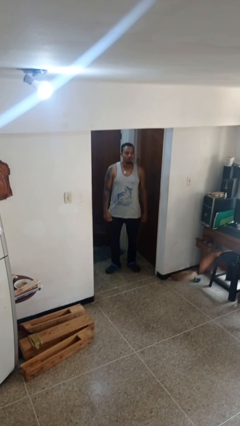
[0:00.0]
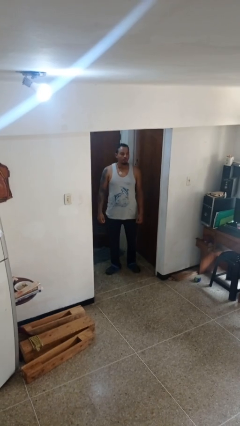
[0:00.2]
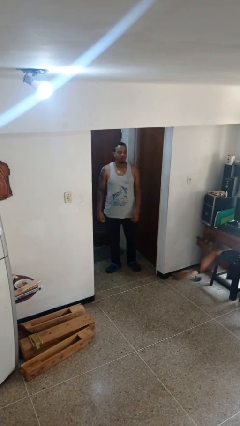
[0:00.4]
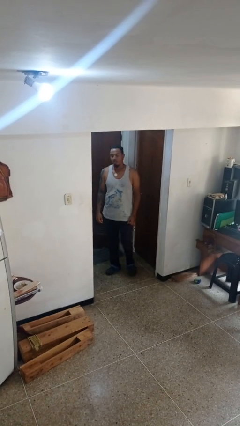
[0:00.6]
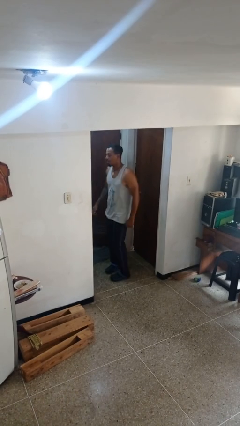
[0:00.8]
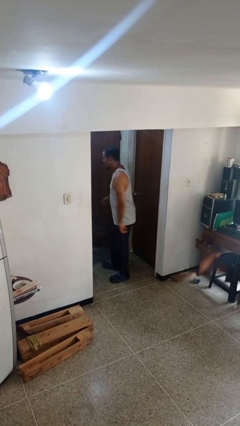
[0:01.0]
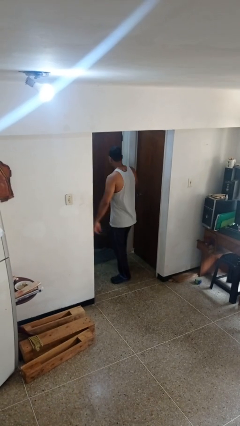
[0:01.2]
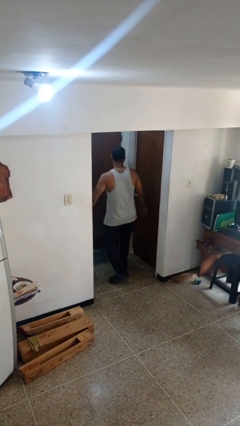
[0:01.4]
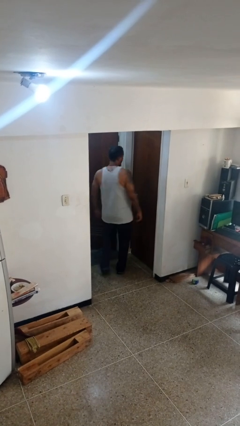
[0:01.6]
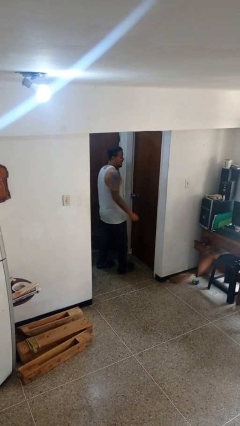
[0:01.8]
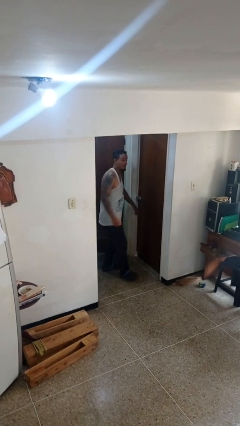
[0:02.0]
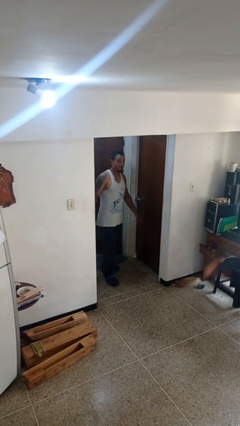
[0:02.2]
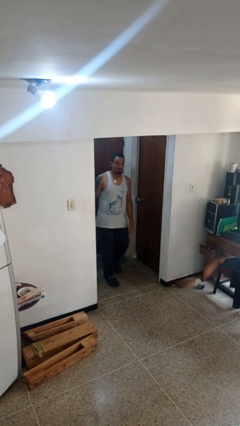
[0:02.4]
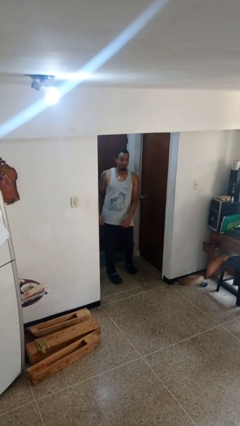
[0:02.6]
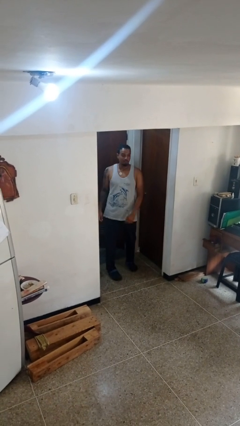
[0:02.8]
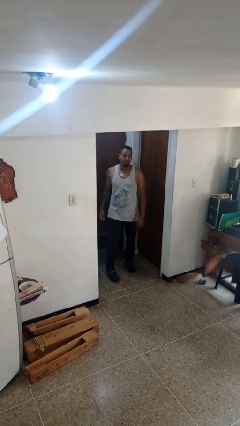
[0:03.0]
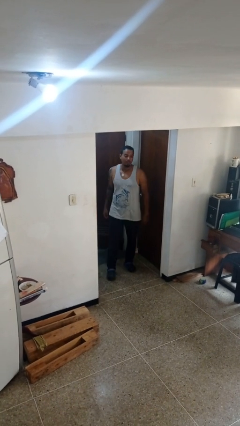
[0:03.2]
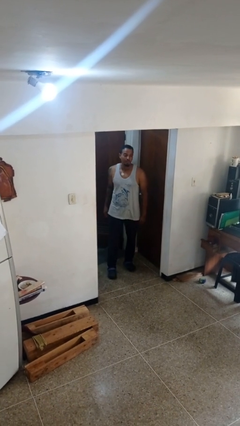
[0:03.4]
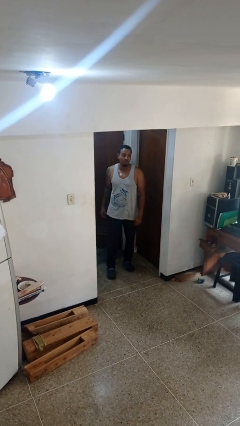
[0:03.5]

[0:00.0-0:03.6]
person twirls

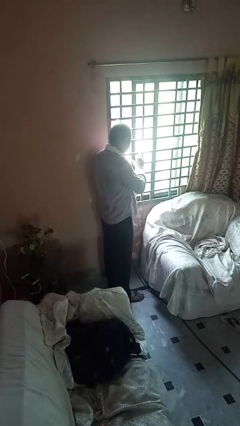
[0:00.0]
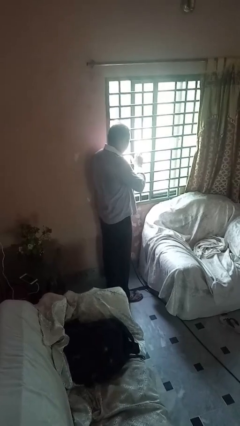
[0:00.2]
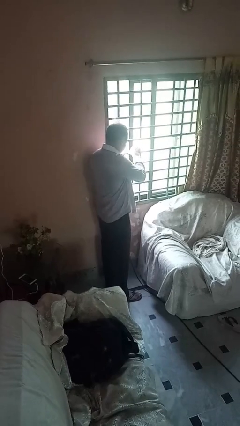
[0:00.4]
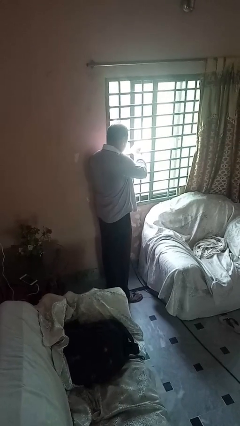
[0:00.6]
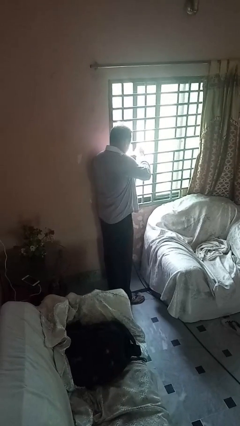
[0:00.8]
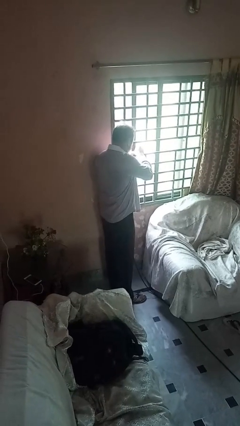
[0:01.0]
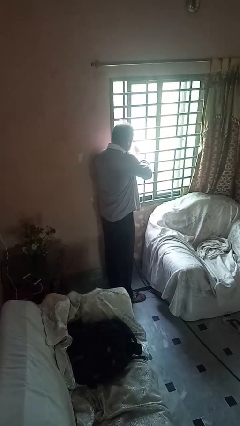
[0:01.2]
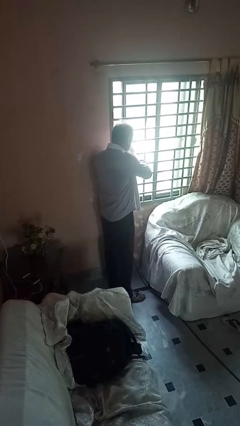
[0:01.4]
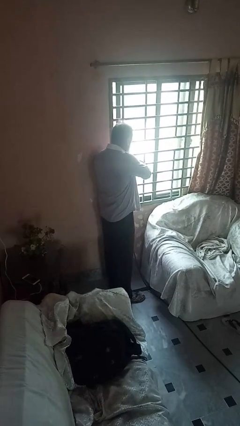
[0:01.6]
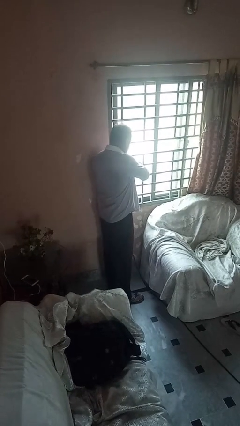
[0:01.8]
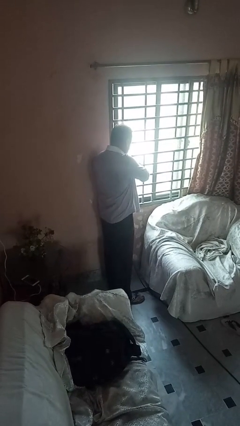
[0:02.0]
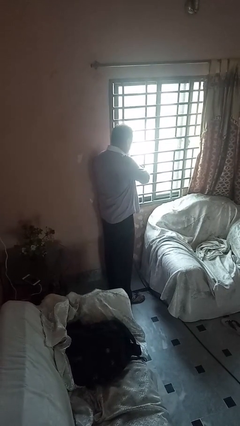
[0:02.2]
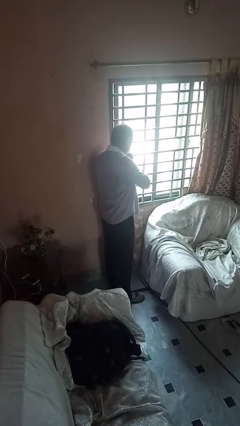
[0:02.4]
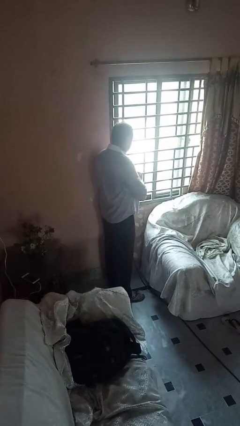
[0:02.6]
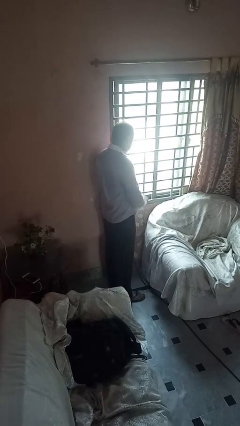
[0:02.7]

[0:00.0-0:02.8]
person closes sliding door

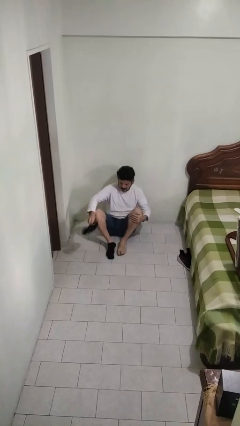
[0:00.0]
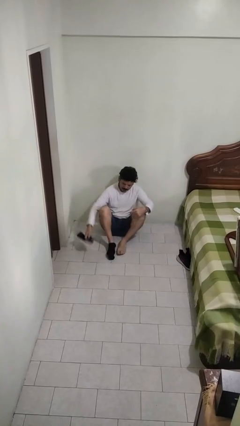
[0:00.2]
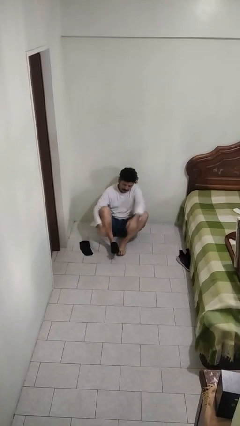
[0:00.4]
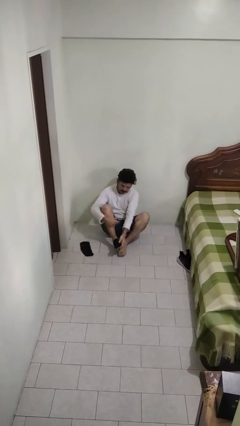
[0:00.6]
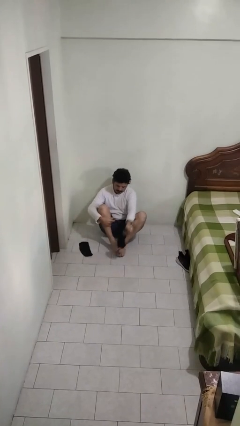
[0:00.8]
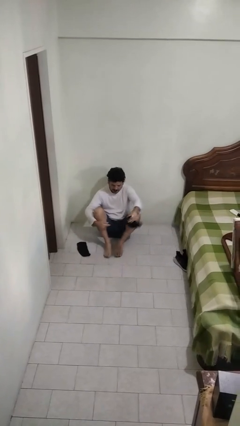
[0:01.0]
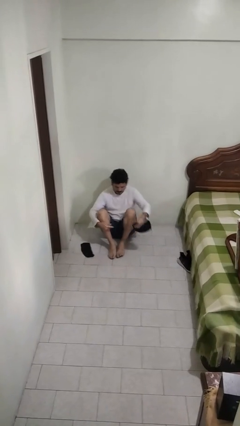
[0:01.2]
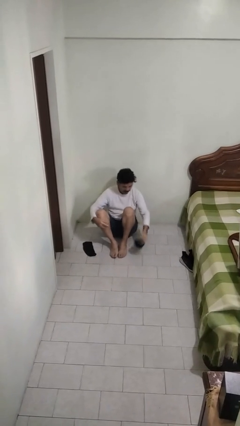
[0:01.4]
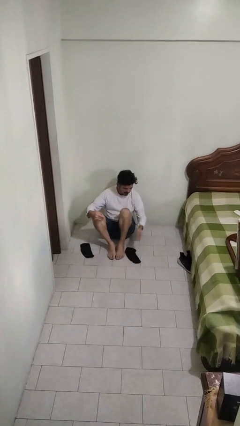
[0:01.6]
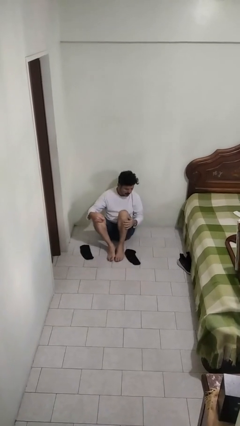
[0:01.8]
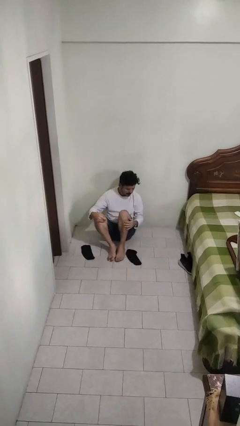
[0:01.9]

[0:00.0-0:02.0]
person takes off socks

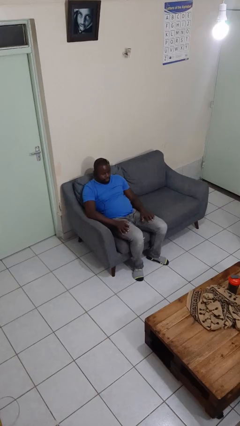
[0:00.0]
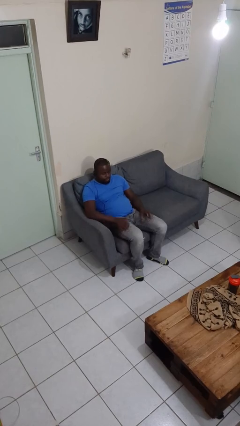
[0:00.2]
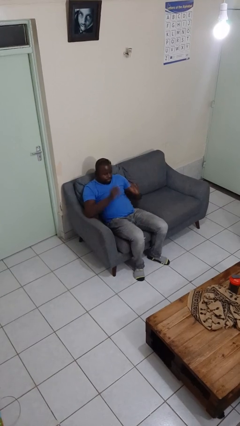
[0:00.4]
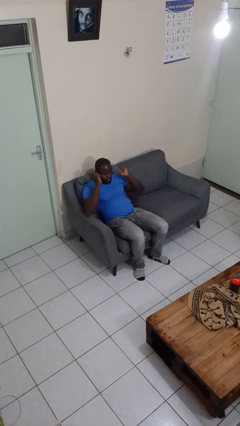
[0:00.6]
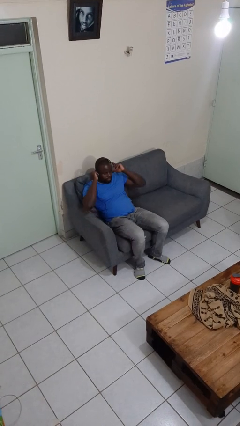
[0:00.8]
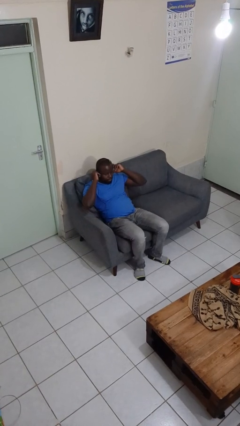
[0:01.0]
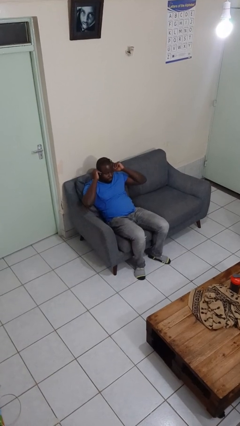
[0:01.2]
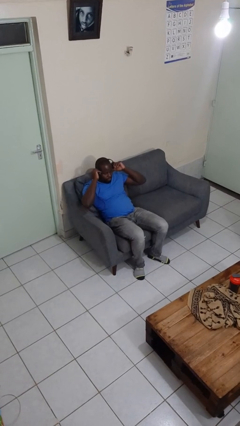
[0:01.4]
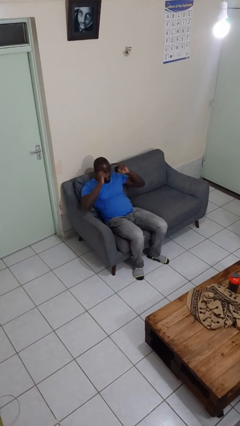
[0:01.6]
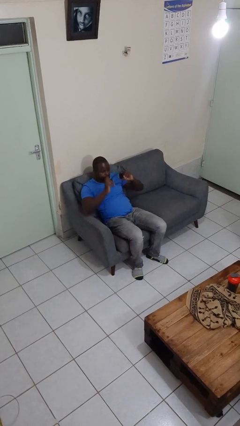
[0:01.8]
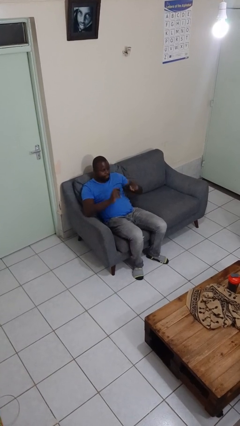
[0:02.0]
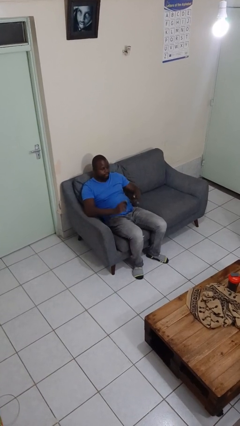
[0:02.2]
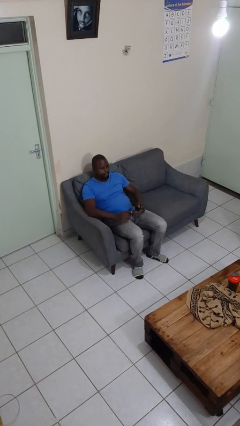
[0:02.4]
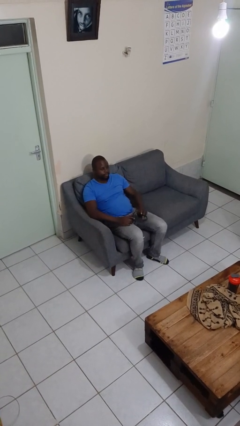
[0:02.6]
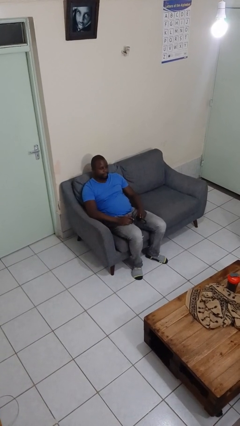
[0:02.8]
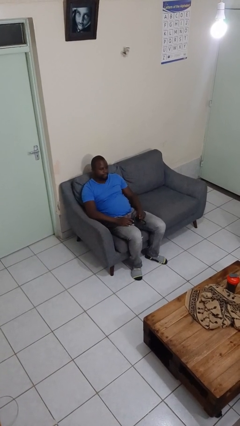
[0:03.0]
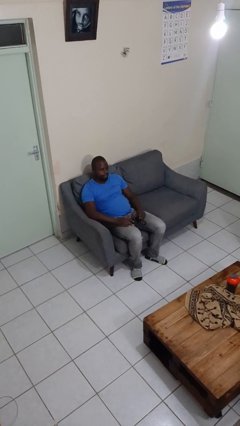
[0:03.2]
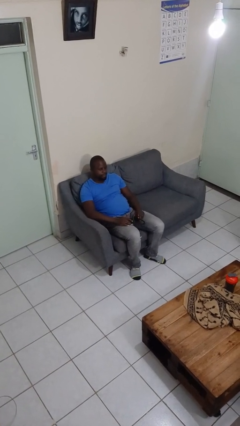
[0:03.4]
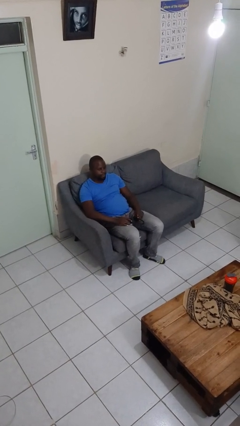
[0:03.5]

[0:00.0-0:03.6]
person takes off headphones

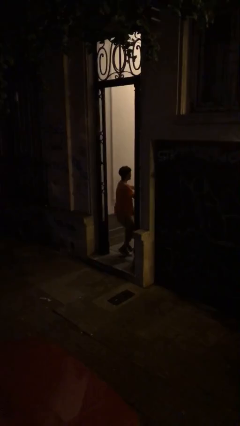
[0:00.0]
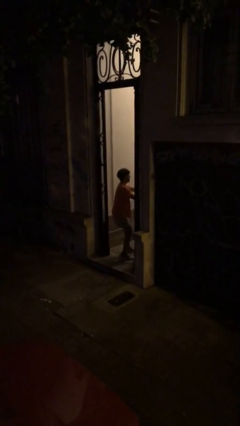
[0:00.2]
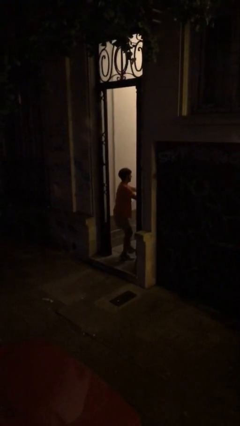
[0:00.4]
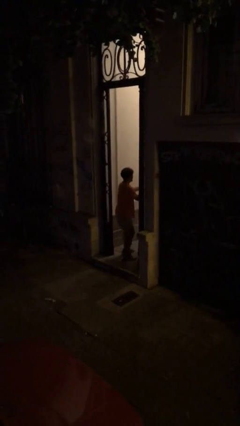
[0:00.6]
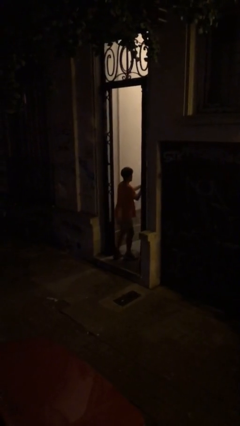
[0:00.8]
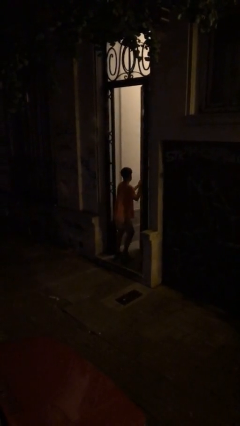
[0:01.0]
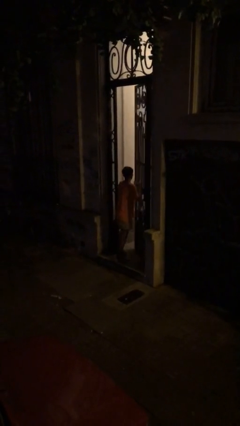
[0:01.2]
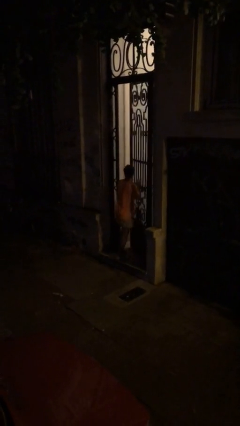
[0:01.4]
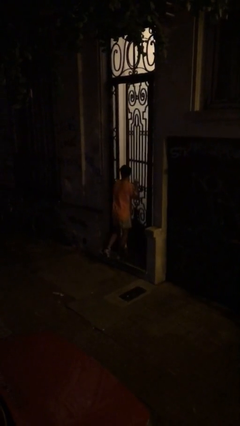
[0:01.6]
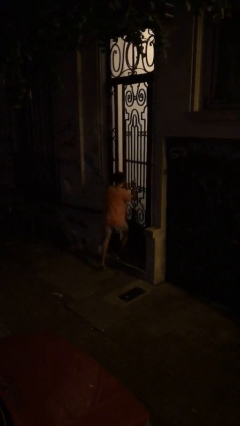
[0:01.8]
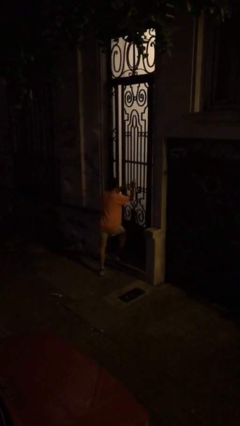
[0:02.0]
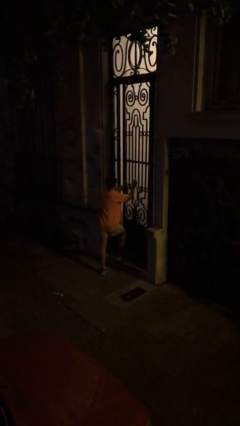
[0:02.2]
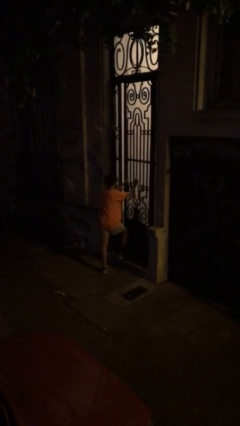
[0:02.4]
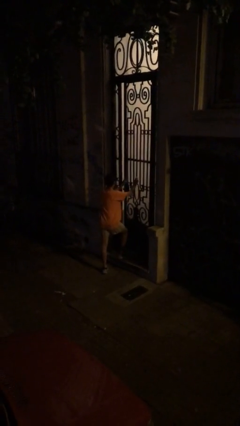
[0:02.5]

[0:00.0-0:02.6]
person closes facility door

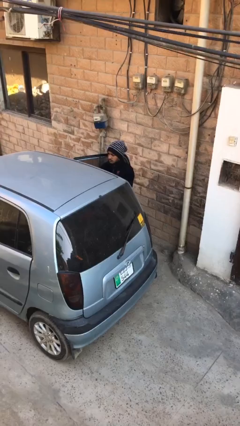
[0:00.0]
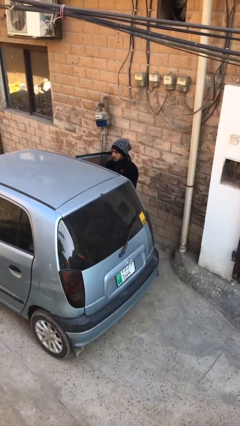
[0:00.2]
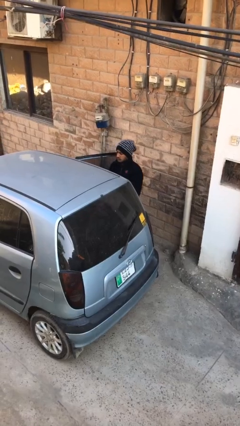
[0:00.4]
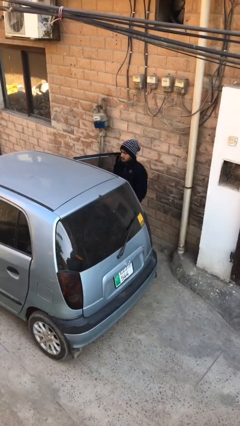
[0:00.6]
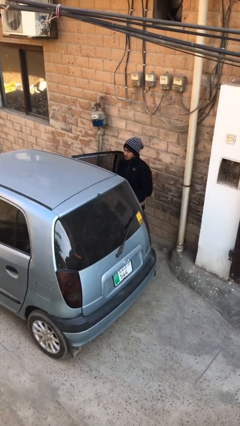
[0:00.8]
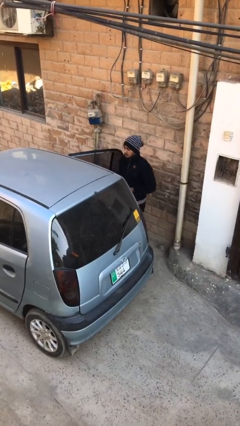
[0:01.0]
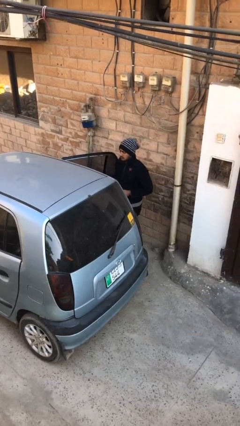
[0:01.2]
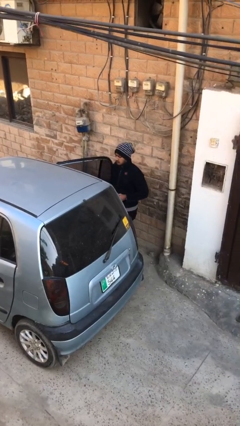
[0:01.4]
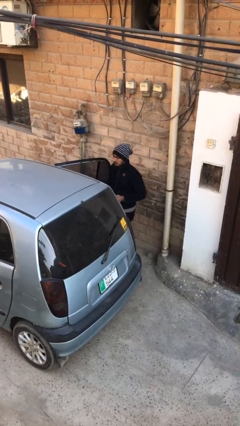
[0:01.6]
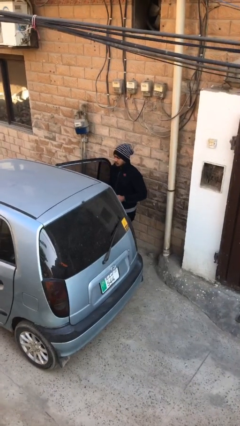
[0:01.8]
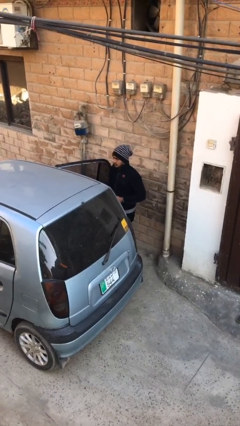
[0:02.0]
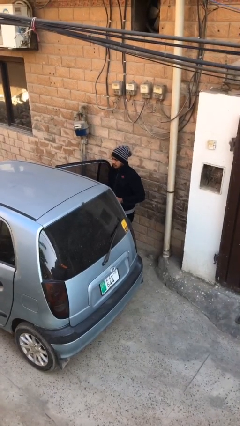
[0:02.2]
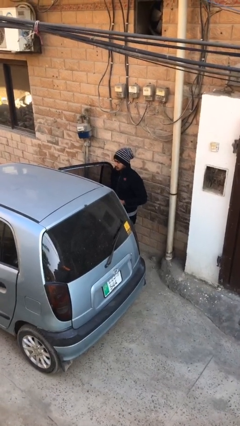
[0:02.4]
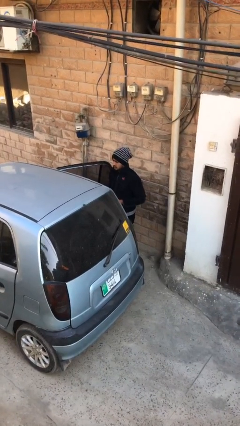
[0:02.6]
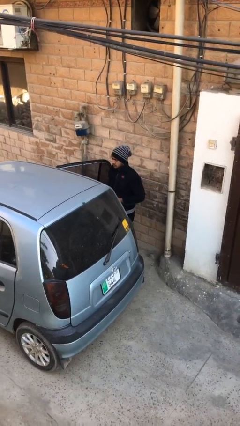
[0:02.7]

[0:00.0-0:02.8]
person unloads car
